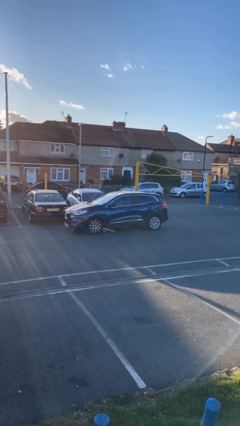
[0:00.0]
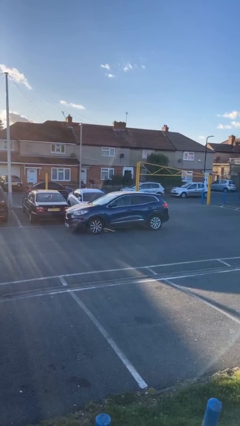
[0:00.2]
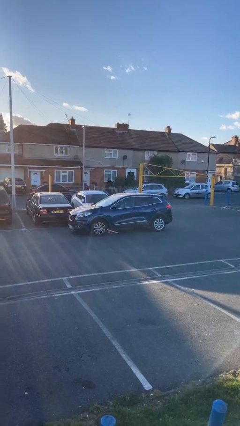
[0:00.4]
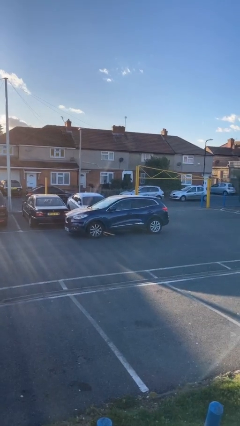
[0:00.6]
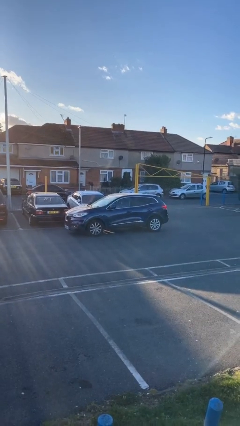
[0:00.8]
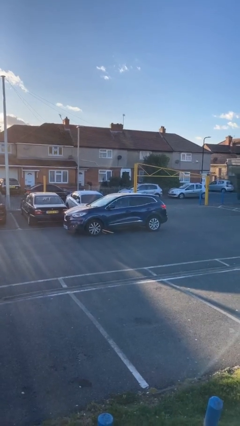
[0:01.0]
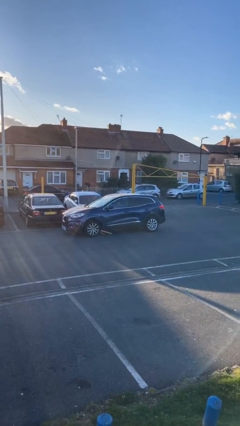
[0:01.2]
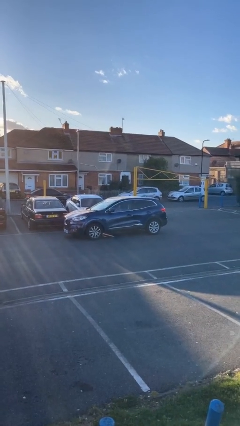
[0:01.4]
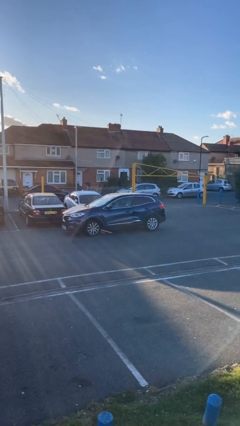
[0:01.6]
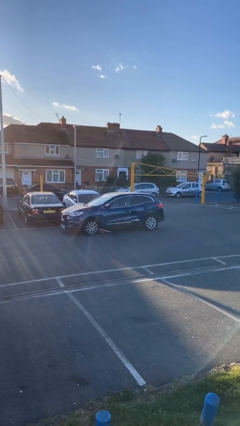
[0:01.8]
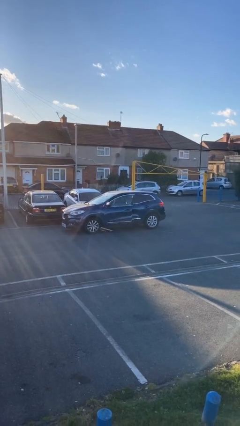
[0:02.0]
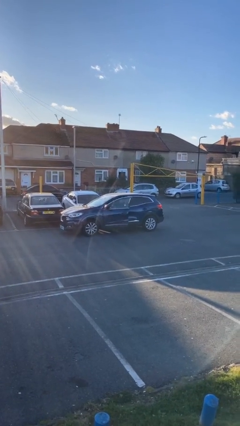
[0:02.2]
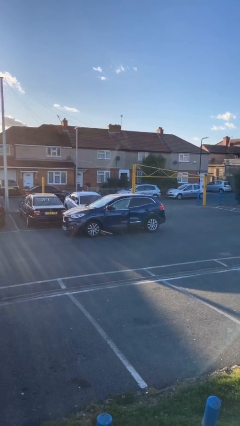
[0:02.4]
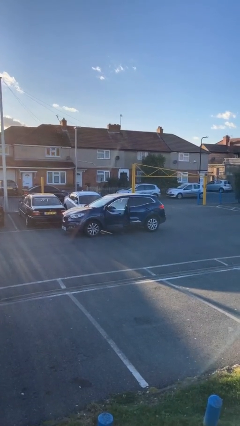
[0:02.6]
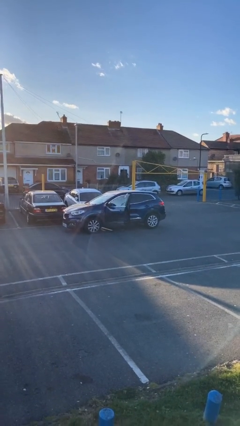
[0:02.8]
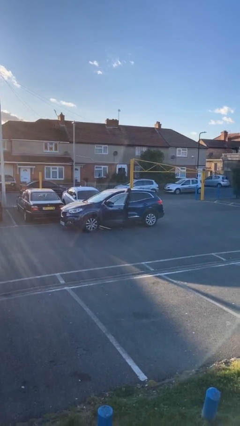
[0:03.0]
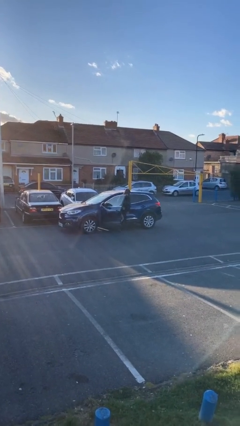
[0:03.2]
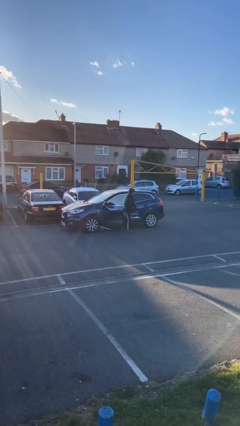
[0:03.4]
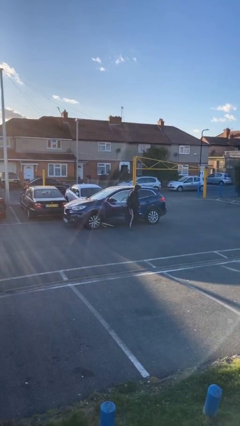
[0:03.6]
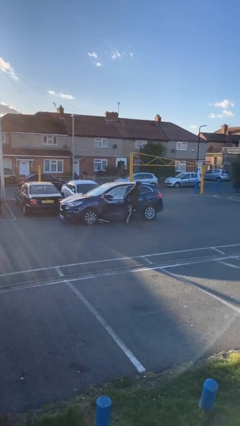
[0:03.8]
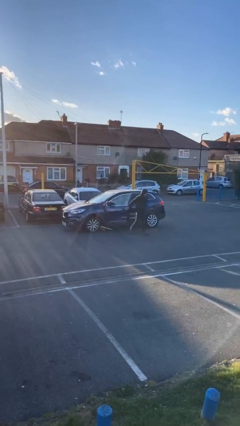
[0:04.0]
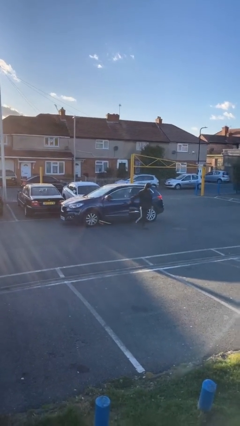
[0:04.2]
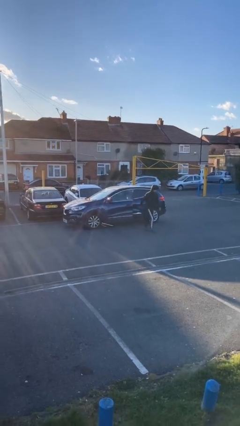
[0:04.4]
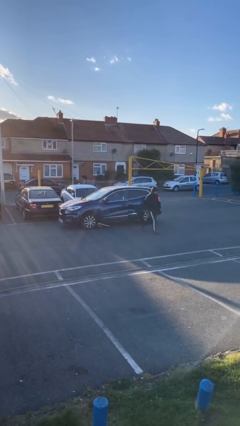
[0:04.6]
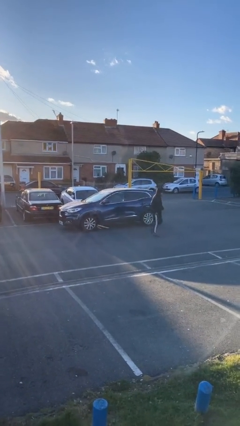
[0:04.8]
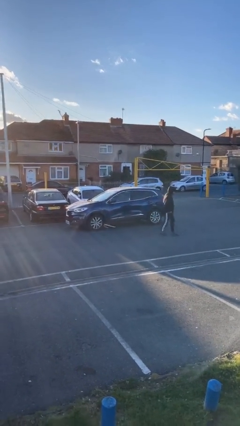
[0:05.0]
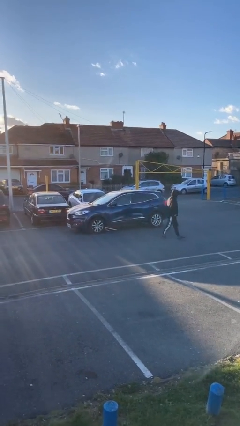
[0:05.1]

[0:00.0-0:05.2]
car drops off person

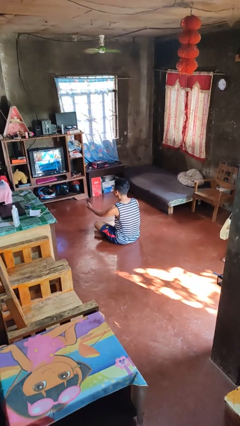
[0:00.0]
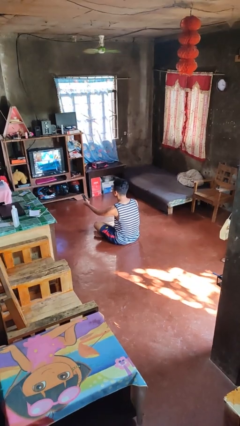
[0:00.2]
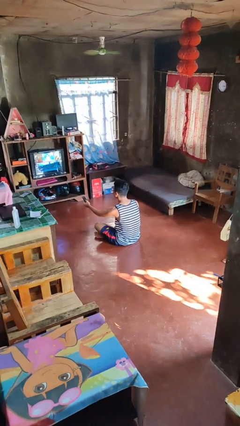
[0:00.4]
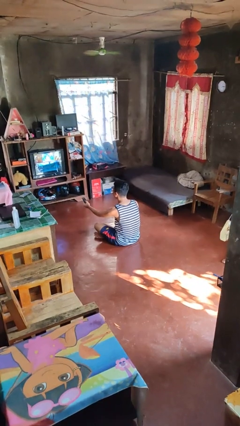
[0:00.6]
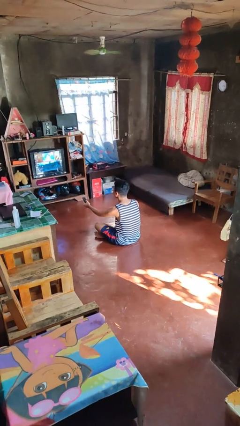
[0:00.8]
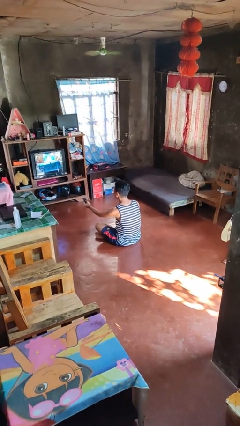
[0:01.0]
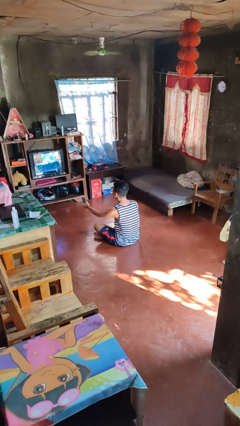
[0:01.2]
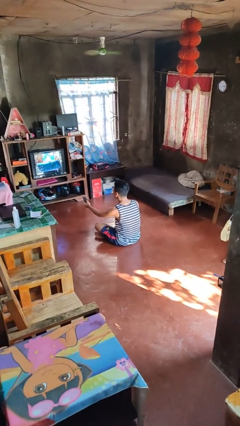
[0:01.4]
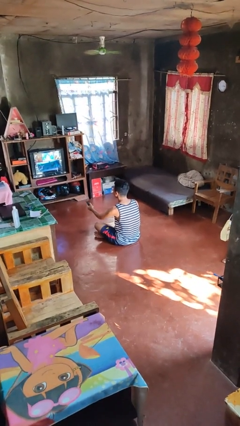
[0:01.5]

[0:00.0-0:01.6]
person uses television remote

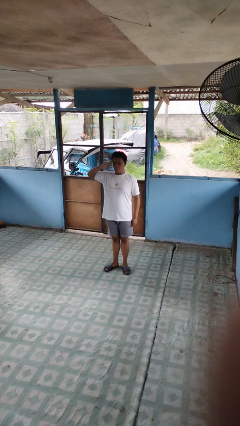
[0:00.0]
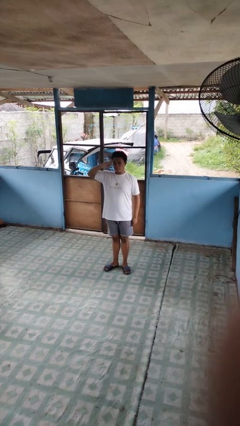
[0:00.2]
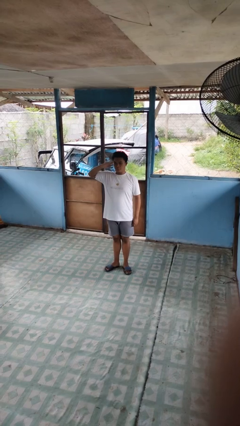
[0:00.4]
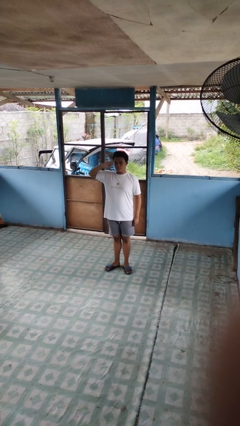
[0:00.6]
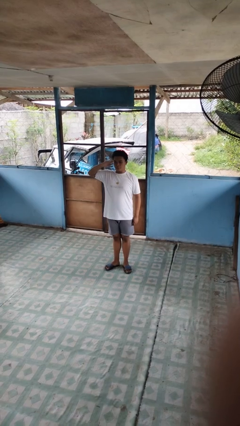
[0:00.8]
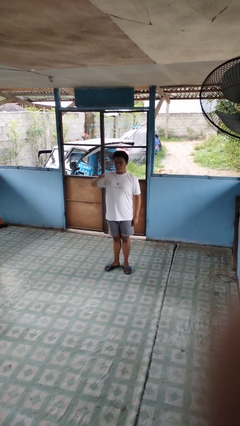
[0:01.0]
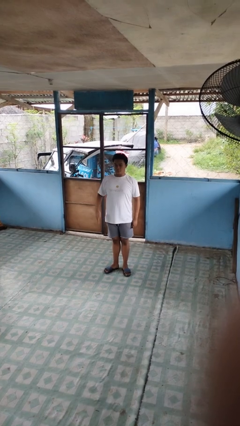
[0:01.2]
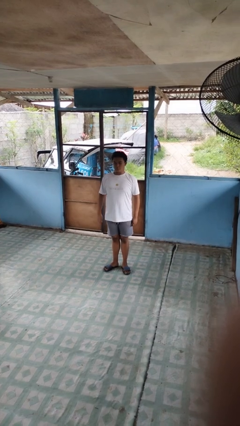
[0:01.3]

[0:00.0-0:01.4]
person salutes

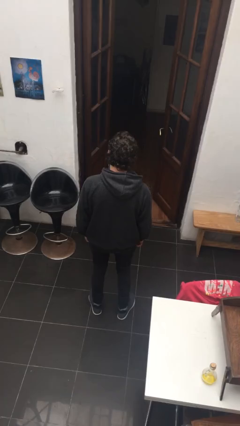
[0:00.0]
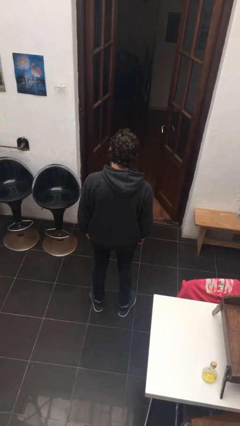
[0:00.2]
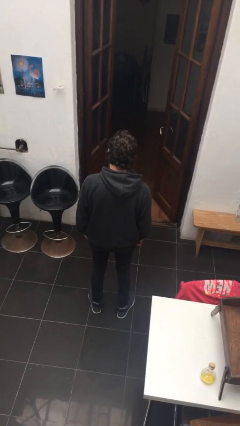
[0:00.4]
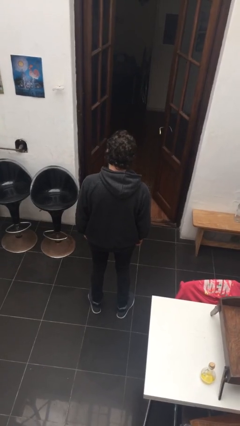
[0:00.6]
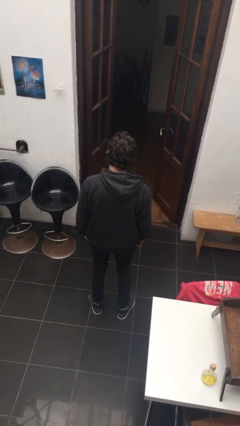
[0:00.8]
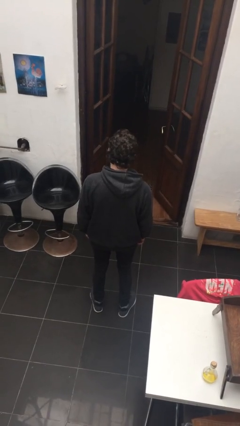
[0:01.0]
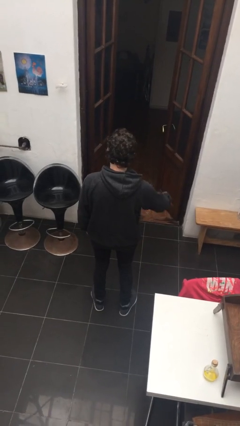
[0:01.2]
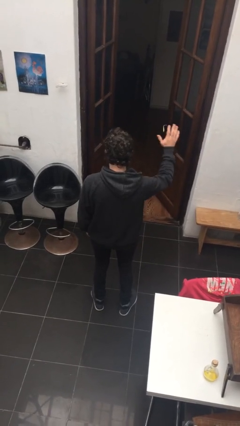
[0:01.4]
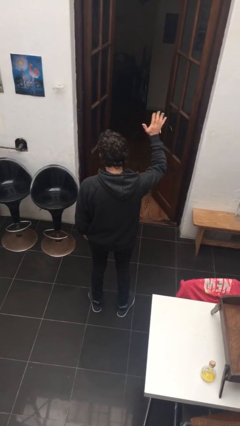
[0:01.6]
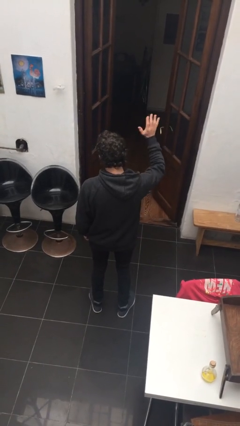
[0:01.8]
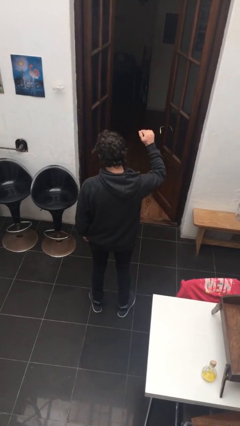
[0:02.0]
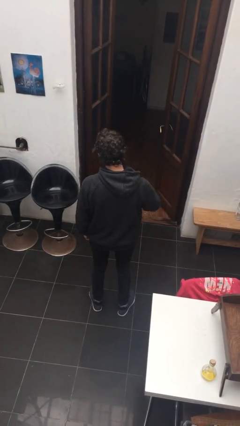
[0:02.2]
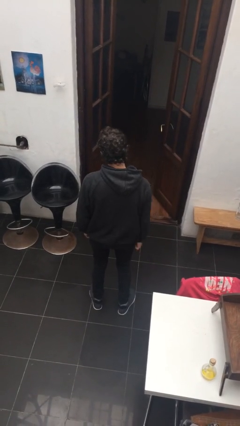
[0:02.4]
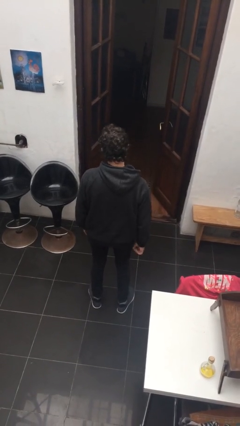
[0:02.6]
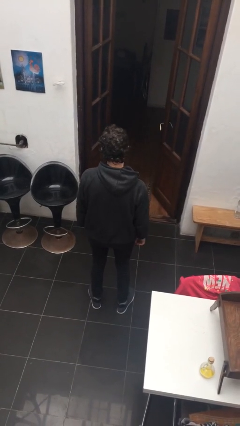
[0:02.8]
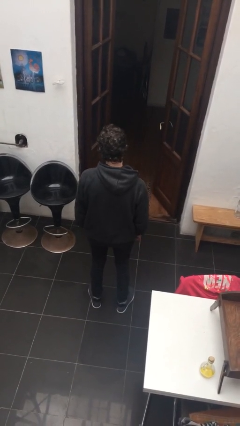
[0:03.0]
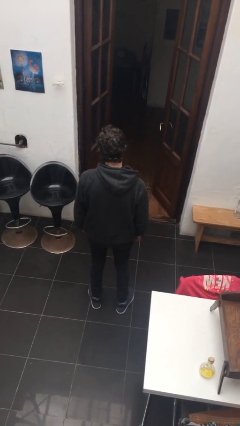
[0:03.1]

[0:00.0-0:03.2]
person waves at person

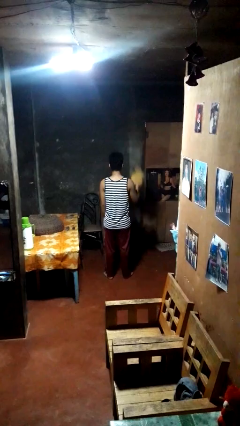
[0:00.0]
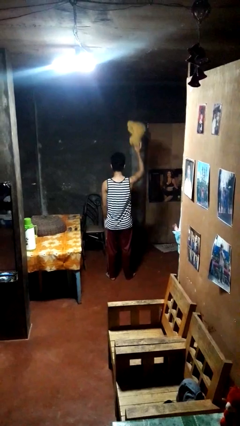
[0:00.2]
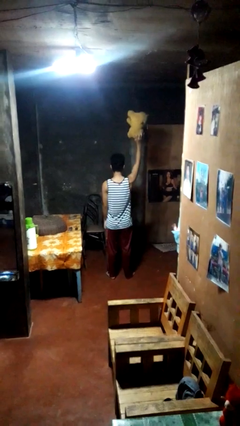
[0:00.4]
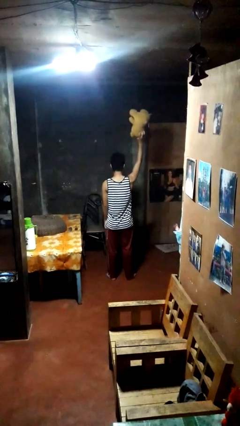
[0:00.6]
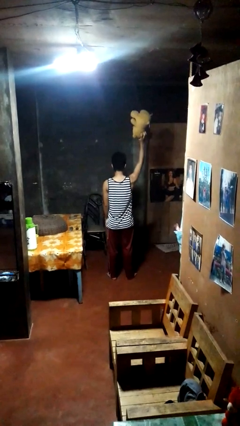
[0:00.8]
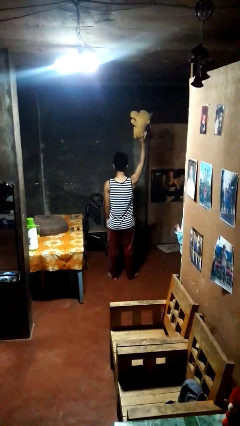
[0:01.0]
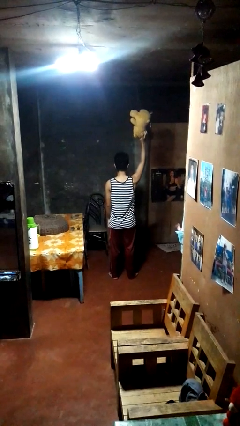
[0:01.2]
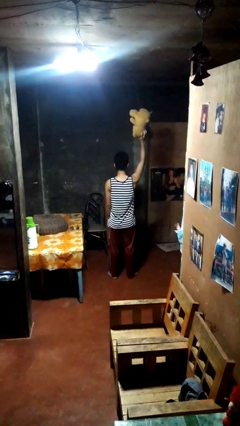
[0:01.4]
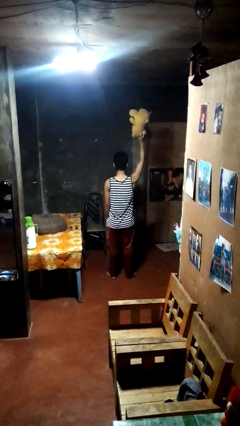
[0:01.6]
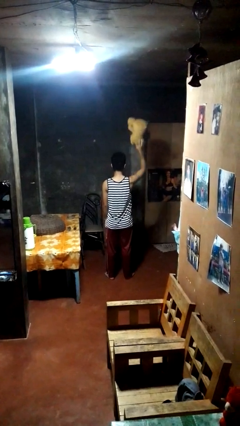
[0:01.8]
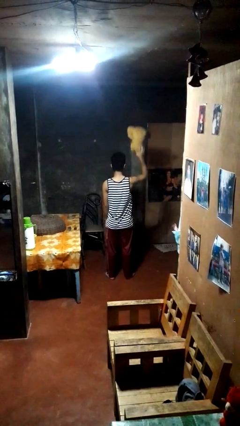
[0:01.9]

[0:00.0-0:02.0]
person holds object above head

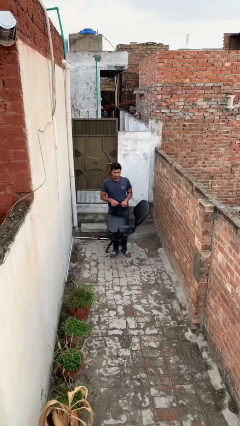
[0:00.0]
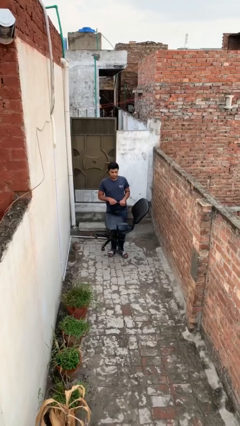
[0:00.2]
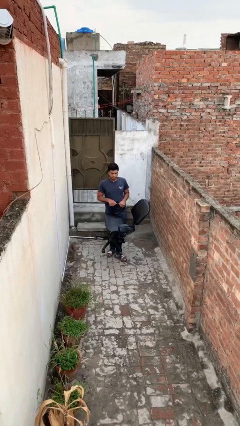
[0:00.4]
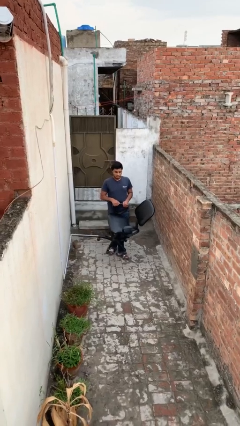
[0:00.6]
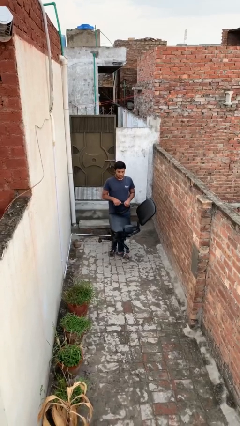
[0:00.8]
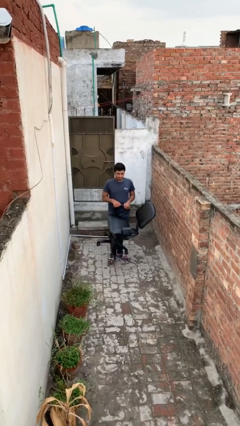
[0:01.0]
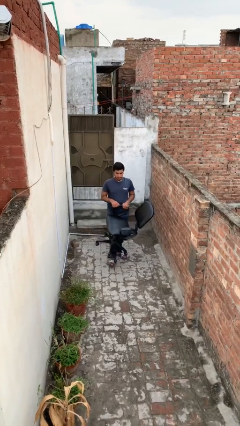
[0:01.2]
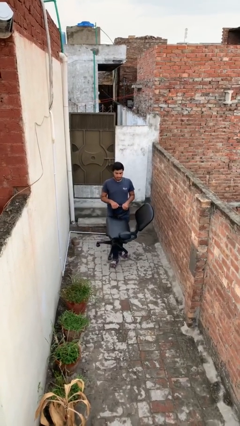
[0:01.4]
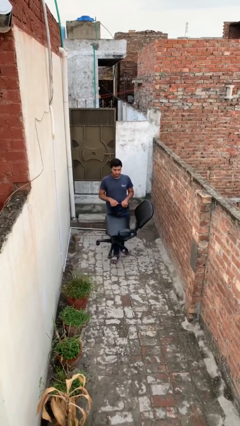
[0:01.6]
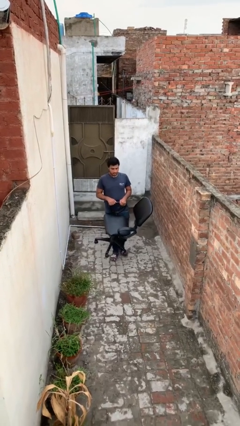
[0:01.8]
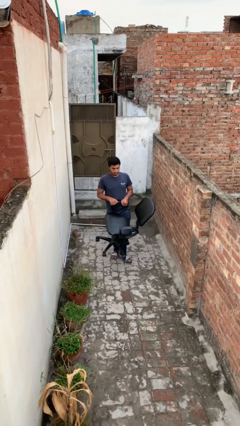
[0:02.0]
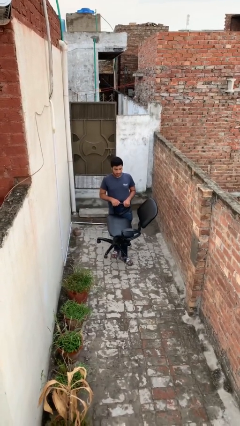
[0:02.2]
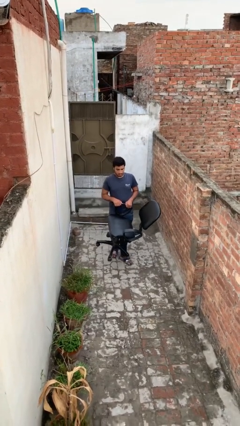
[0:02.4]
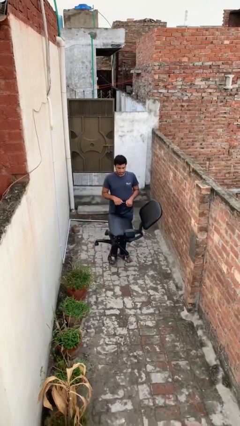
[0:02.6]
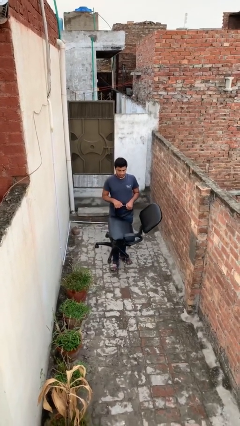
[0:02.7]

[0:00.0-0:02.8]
person carries heavy object

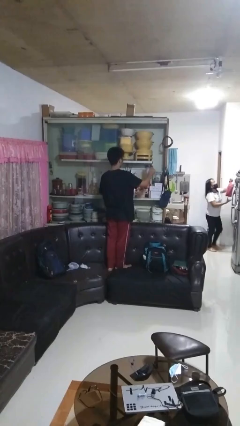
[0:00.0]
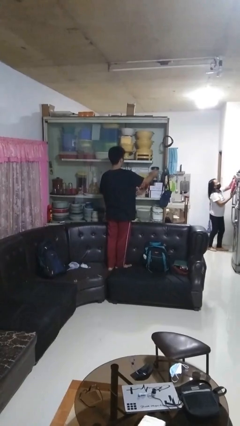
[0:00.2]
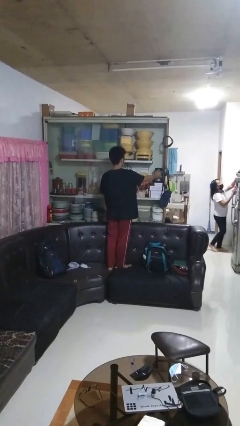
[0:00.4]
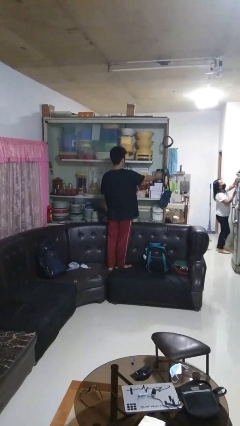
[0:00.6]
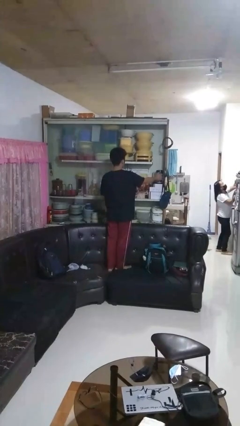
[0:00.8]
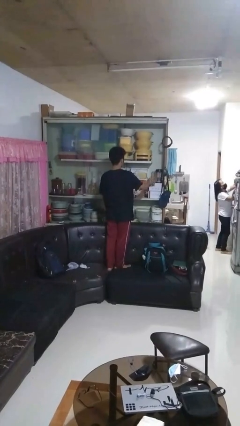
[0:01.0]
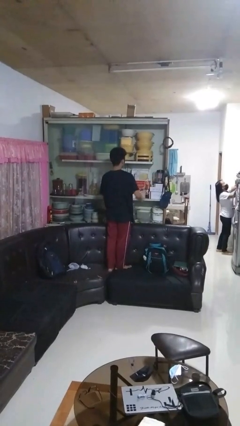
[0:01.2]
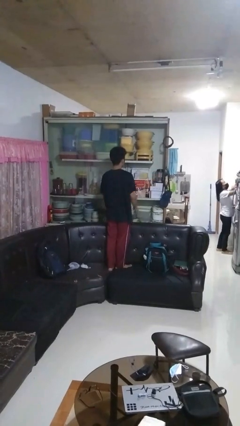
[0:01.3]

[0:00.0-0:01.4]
person puts down object into cabinet
